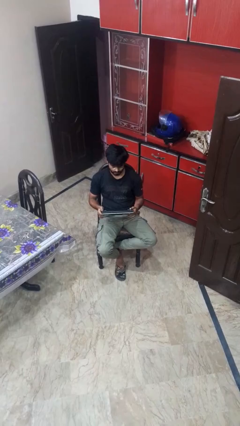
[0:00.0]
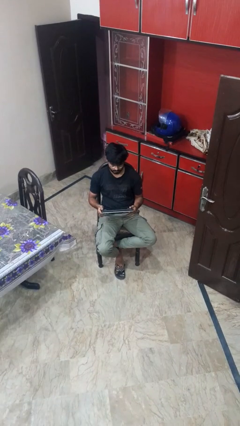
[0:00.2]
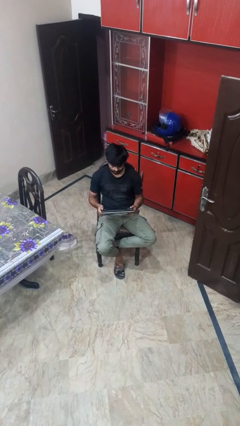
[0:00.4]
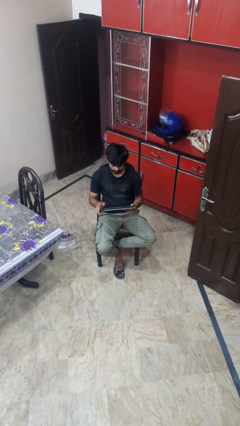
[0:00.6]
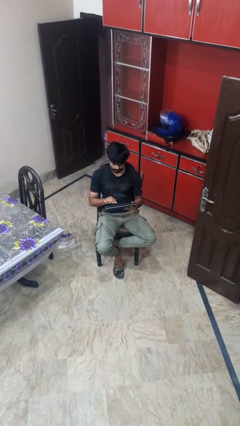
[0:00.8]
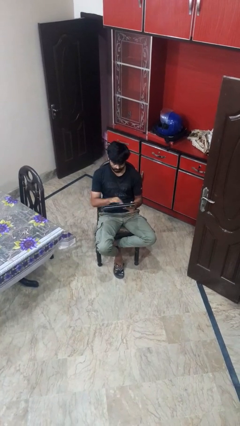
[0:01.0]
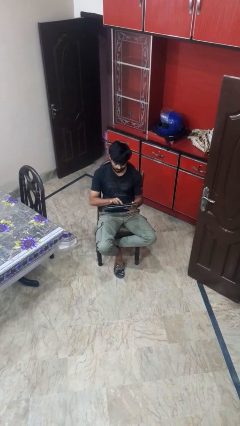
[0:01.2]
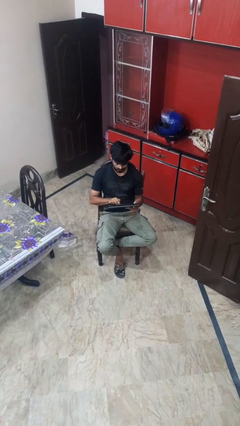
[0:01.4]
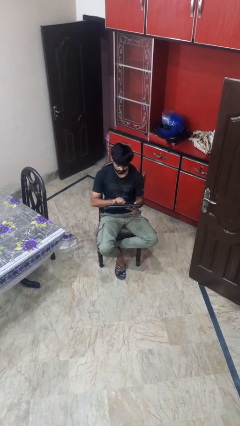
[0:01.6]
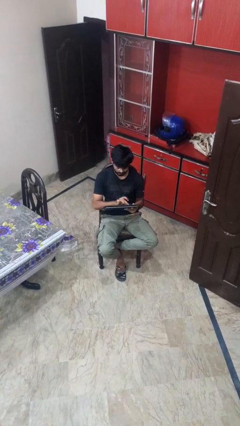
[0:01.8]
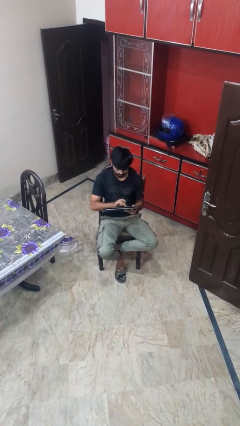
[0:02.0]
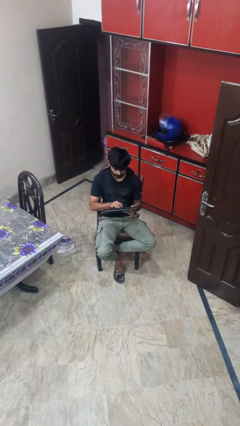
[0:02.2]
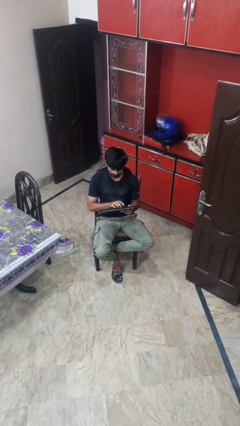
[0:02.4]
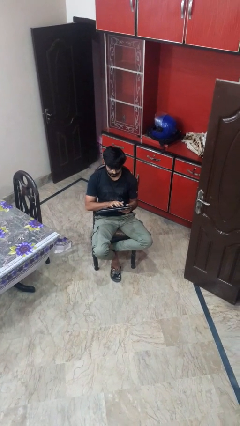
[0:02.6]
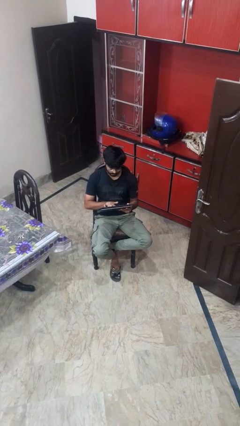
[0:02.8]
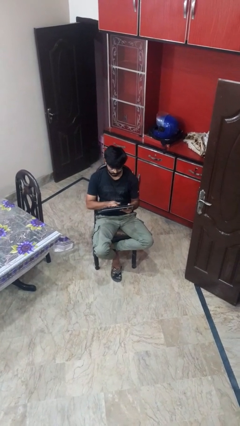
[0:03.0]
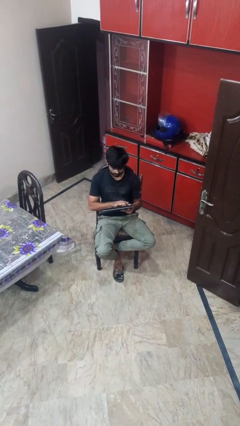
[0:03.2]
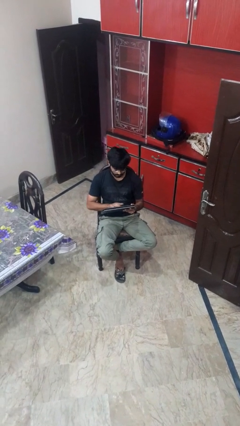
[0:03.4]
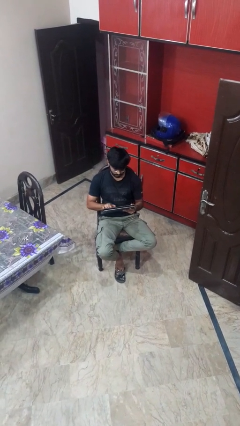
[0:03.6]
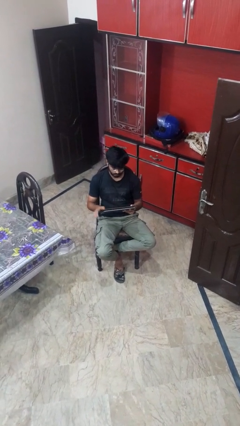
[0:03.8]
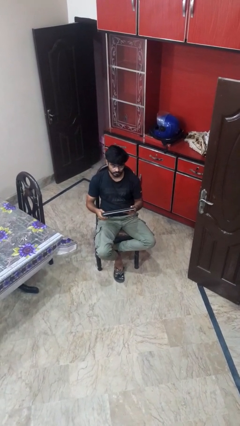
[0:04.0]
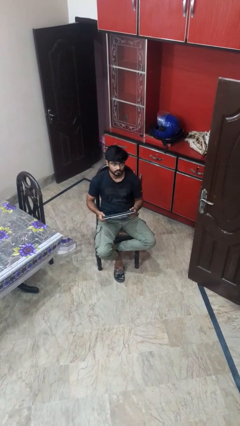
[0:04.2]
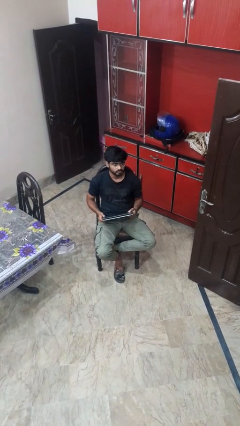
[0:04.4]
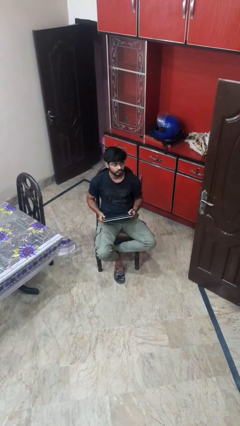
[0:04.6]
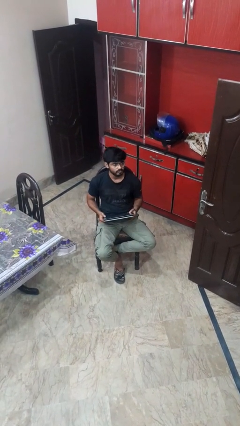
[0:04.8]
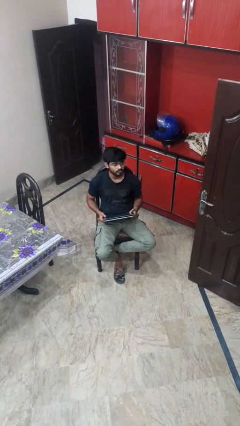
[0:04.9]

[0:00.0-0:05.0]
person interacts with tablet

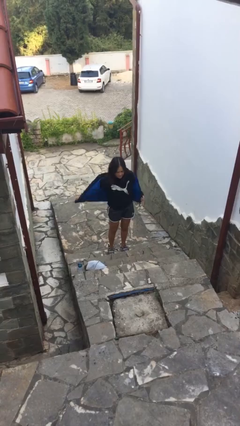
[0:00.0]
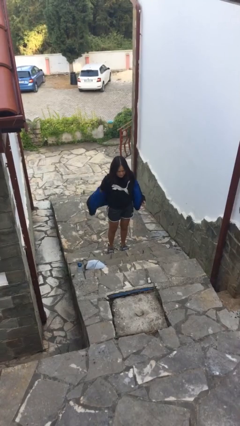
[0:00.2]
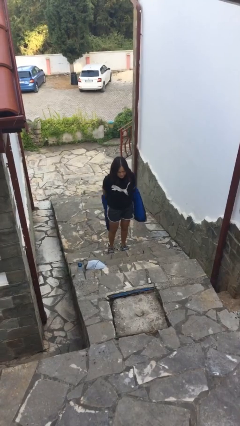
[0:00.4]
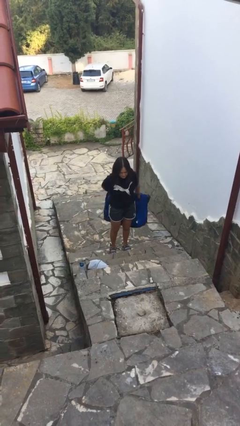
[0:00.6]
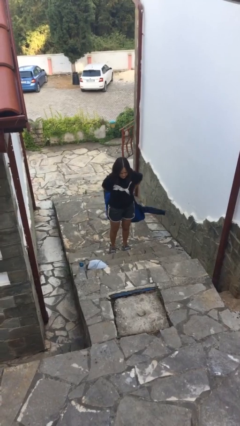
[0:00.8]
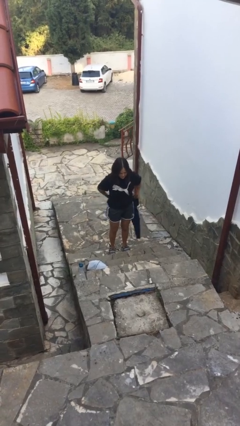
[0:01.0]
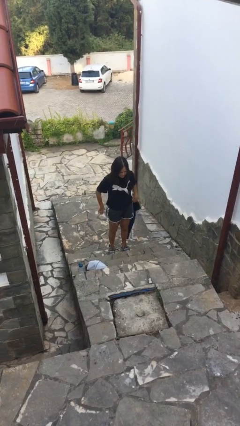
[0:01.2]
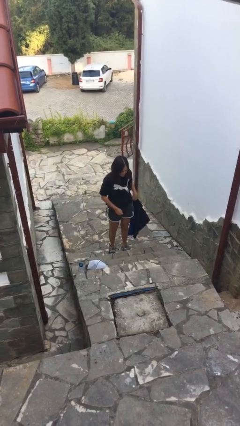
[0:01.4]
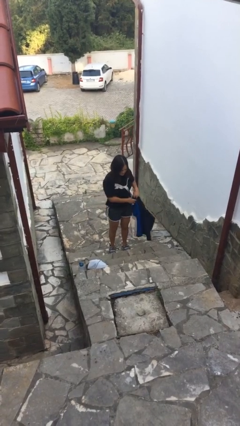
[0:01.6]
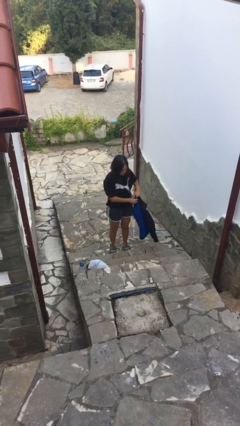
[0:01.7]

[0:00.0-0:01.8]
person takes off jacket

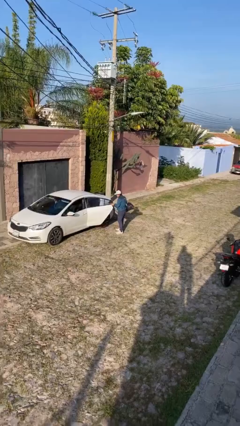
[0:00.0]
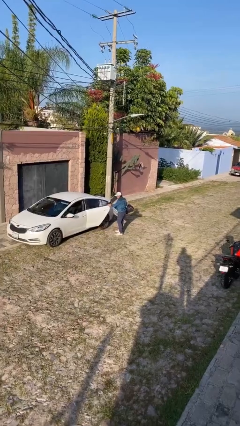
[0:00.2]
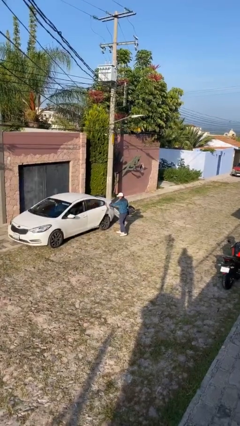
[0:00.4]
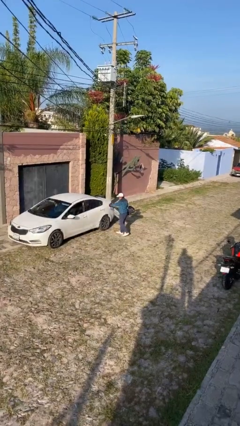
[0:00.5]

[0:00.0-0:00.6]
person closes car door

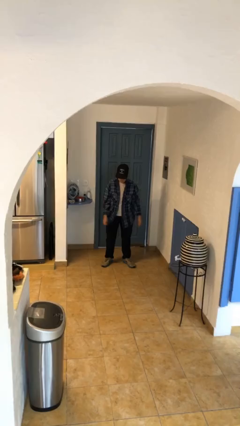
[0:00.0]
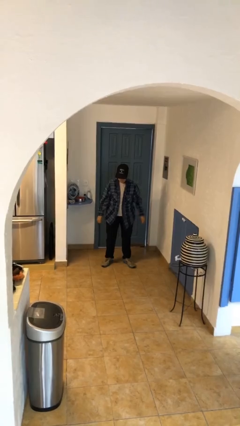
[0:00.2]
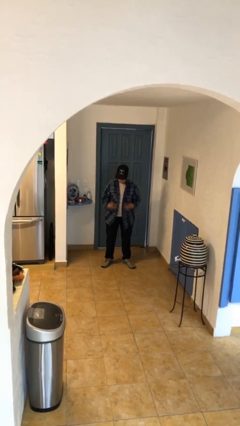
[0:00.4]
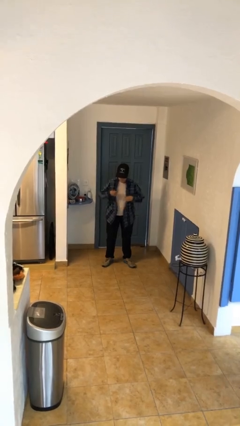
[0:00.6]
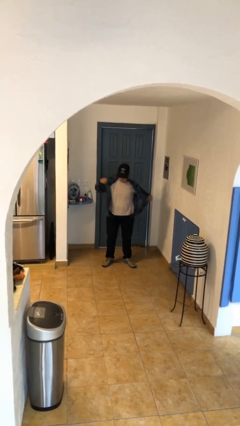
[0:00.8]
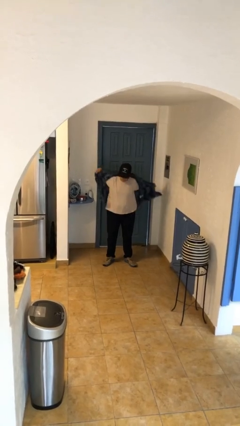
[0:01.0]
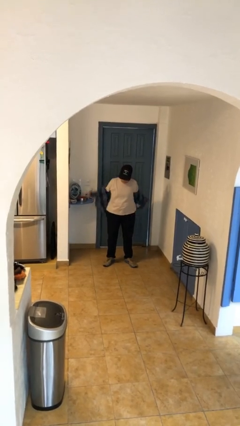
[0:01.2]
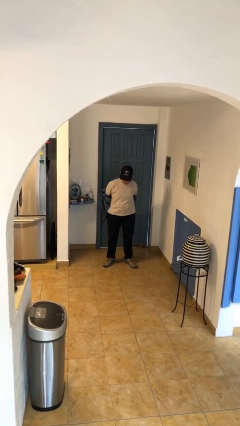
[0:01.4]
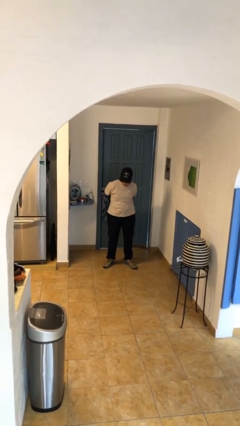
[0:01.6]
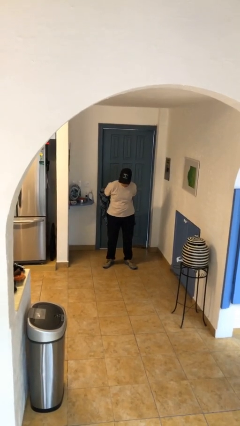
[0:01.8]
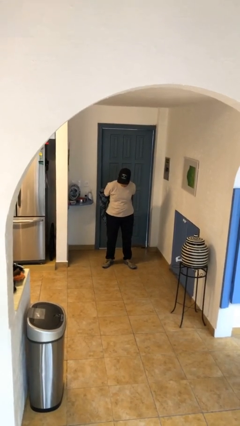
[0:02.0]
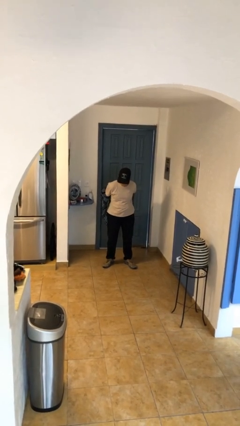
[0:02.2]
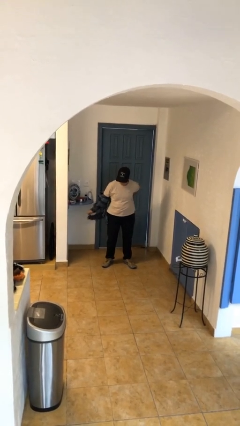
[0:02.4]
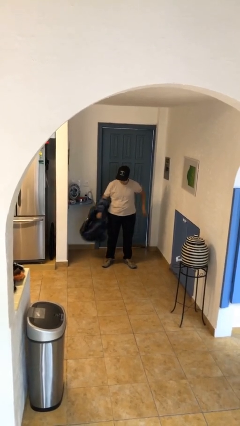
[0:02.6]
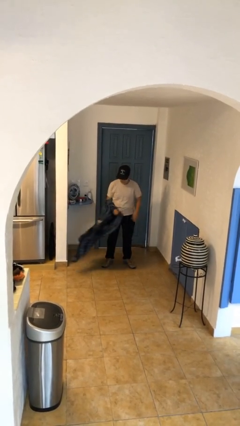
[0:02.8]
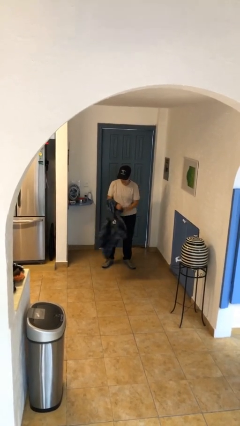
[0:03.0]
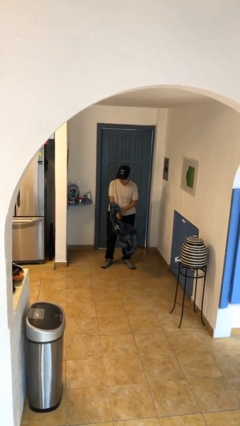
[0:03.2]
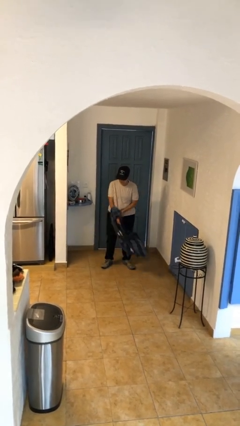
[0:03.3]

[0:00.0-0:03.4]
person takes off shirt

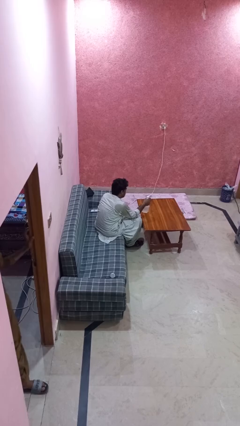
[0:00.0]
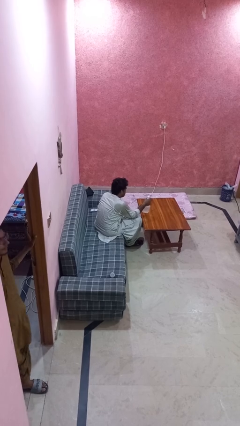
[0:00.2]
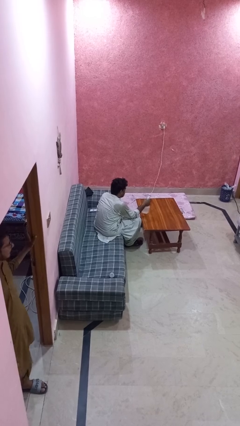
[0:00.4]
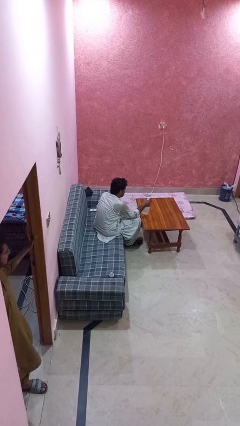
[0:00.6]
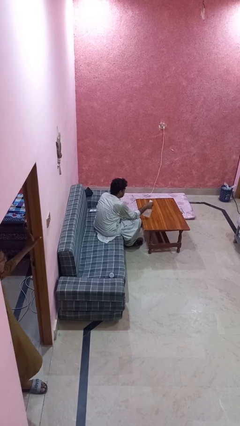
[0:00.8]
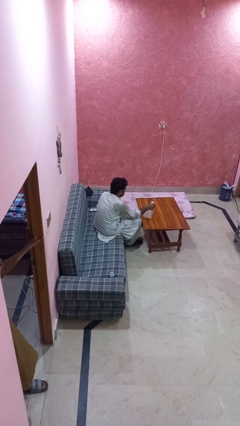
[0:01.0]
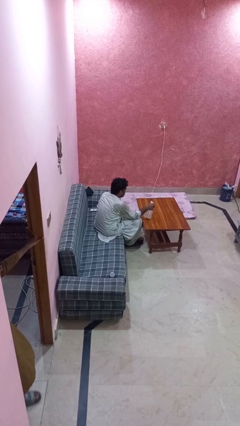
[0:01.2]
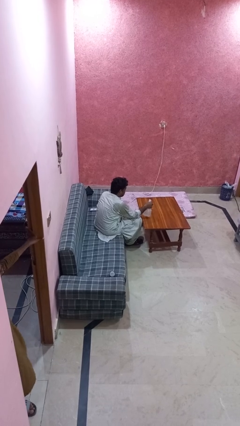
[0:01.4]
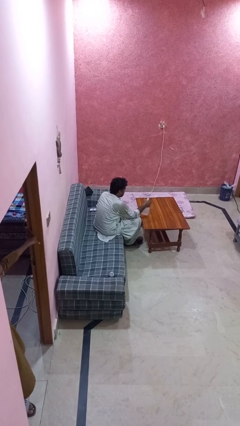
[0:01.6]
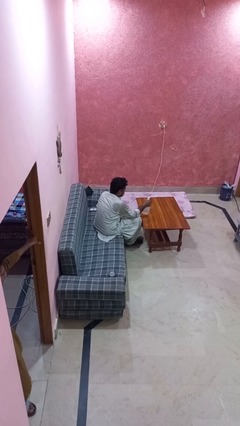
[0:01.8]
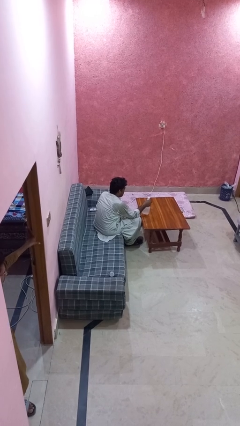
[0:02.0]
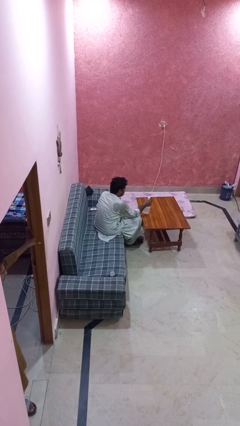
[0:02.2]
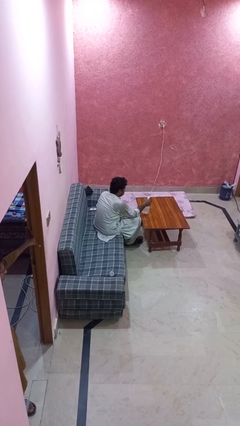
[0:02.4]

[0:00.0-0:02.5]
person sprays from bottle

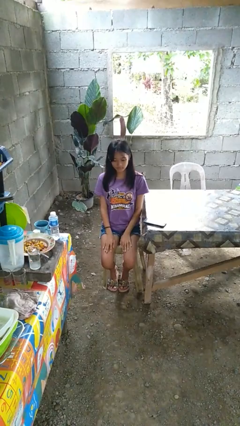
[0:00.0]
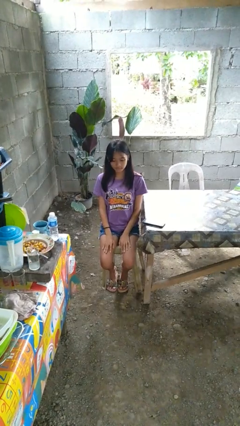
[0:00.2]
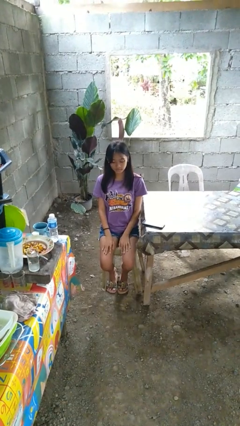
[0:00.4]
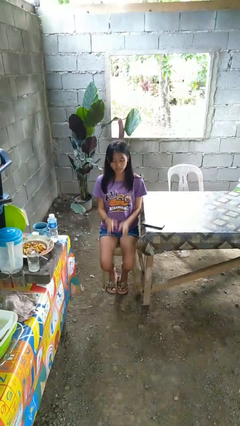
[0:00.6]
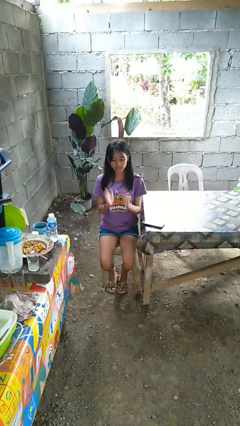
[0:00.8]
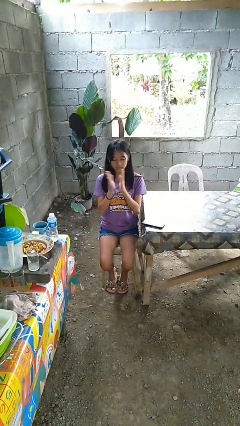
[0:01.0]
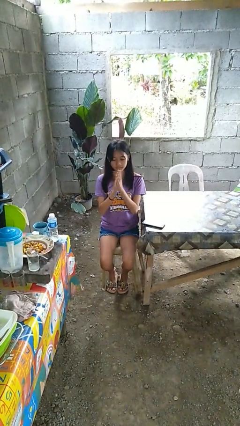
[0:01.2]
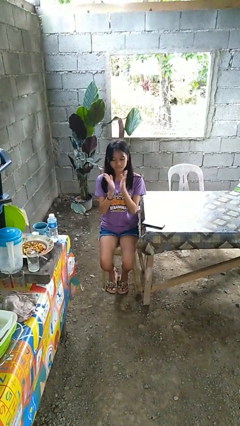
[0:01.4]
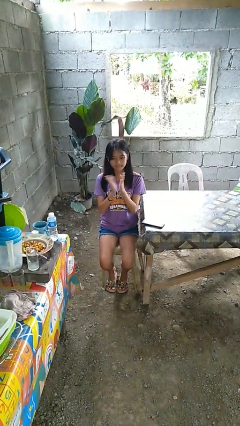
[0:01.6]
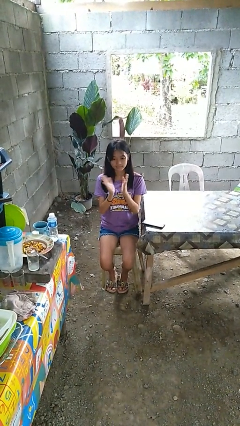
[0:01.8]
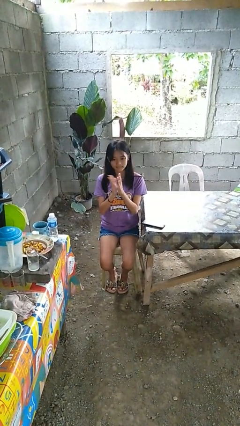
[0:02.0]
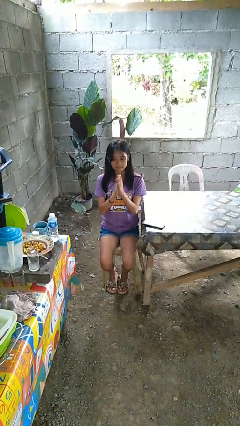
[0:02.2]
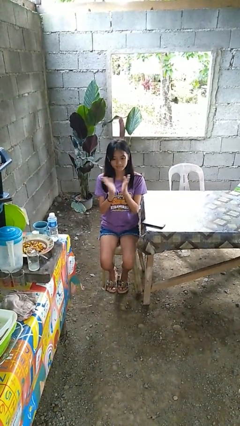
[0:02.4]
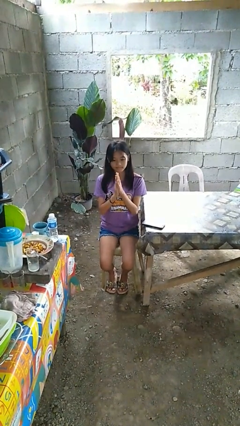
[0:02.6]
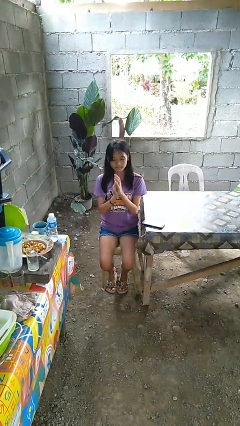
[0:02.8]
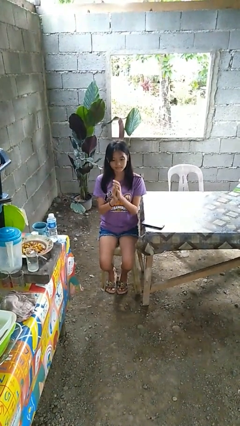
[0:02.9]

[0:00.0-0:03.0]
person claps hands

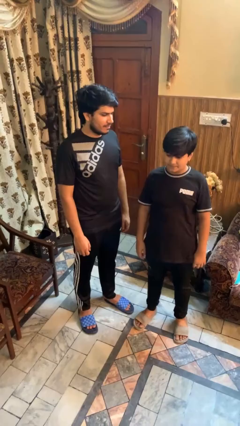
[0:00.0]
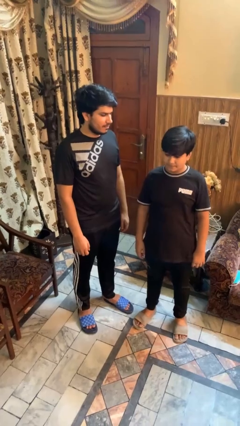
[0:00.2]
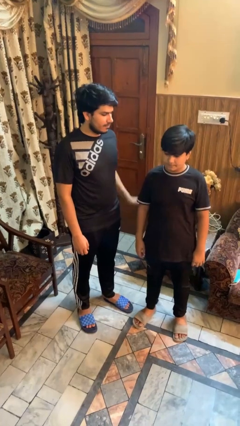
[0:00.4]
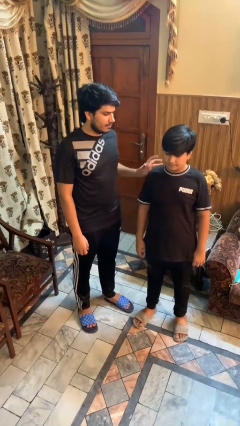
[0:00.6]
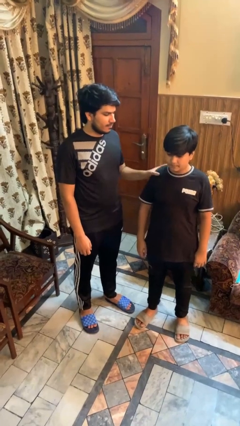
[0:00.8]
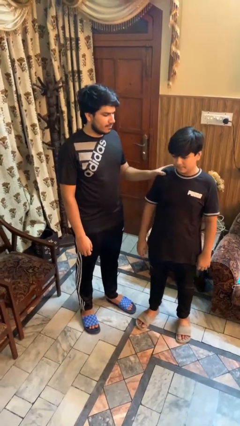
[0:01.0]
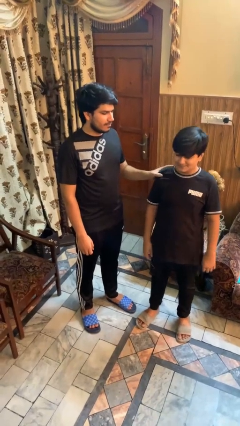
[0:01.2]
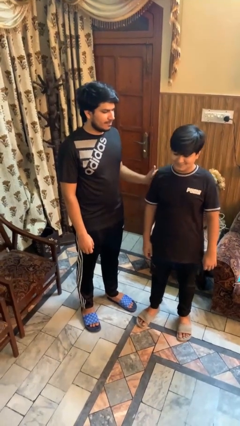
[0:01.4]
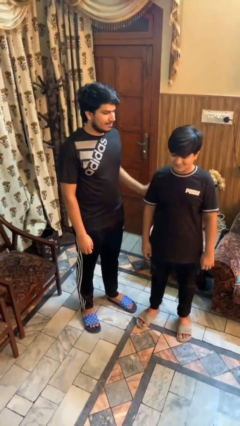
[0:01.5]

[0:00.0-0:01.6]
person tickles person
